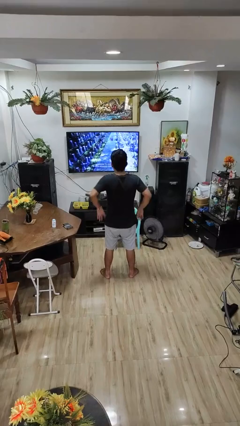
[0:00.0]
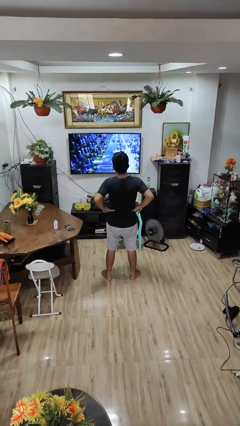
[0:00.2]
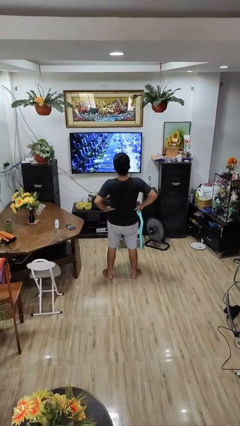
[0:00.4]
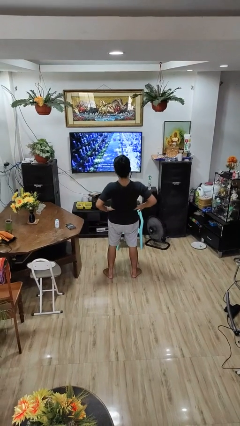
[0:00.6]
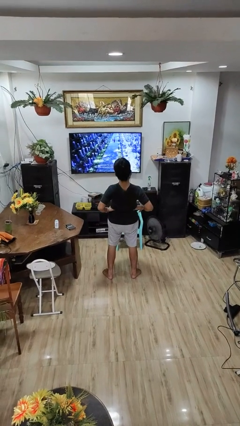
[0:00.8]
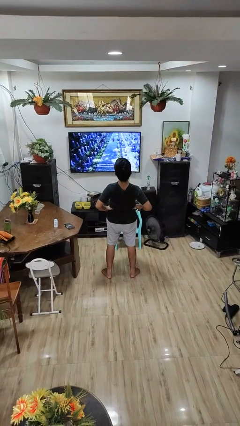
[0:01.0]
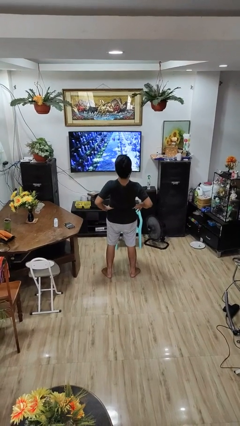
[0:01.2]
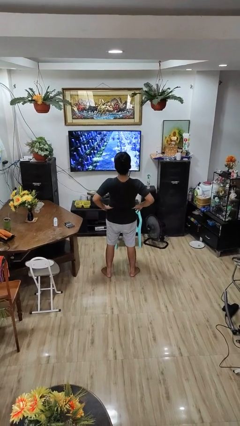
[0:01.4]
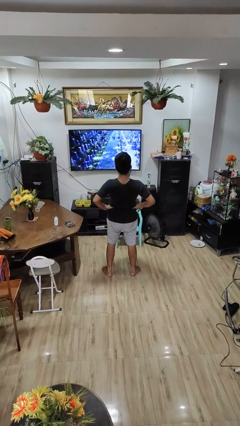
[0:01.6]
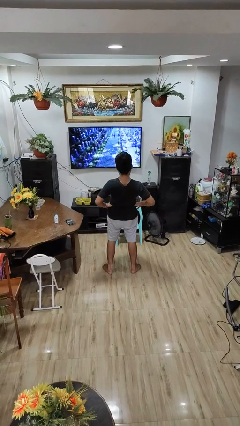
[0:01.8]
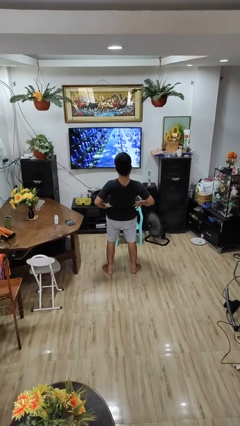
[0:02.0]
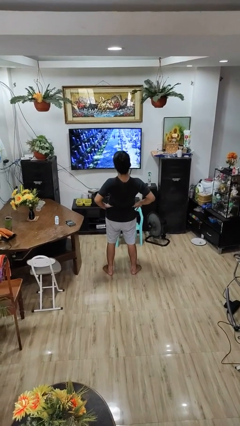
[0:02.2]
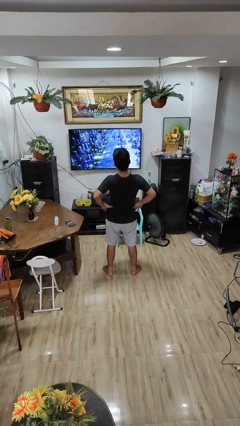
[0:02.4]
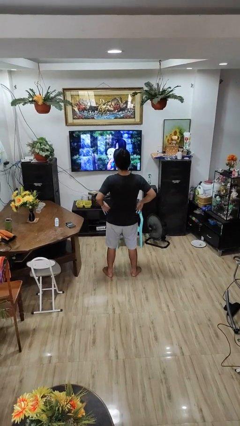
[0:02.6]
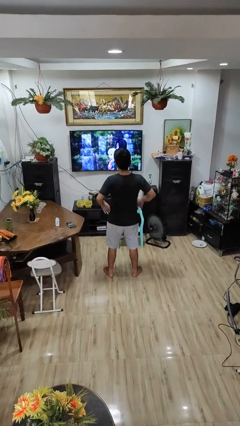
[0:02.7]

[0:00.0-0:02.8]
person stretches back

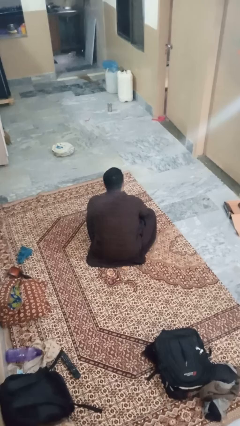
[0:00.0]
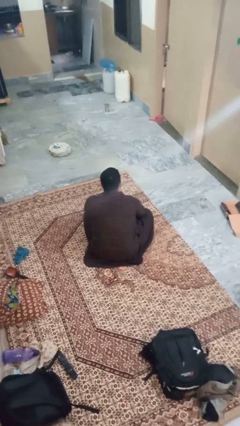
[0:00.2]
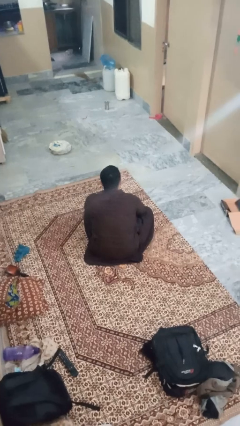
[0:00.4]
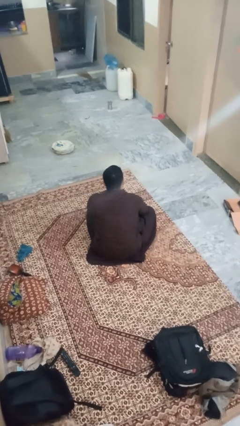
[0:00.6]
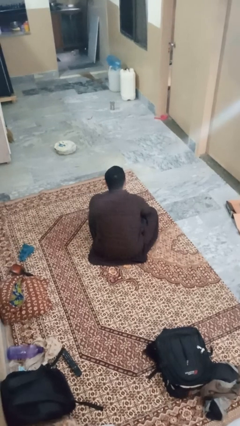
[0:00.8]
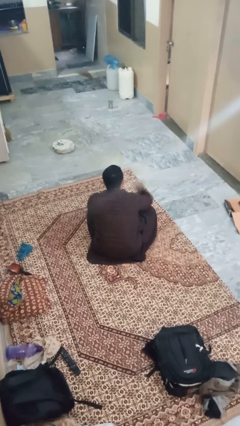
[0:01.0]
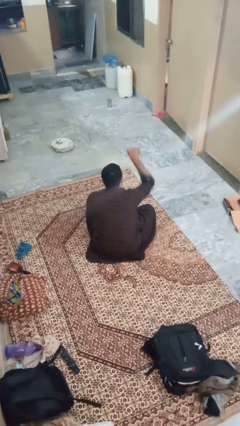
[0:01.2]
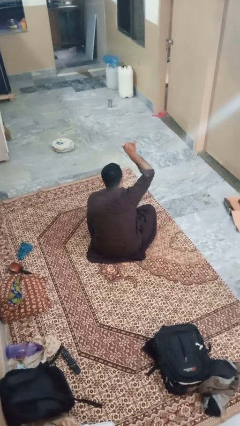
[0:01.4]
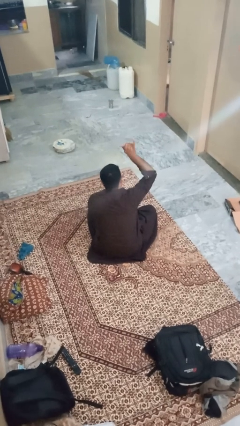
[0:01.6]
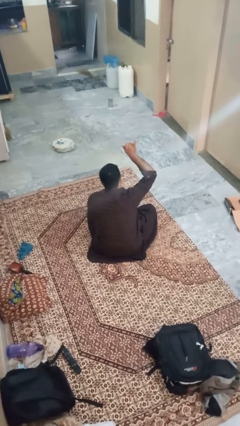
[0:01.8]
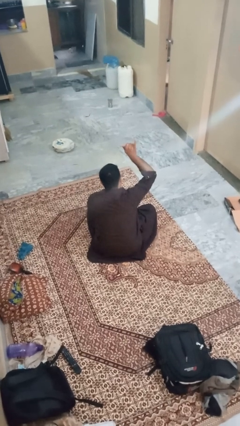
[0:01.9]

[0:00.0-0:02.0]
person gestures hang loose

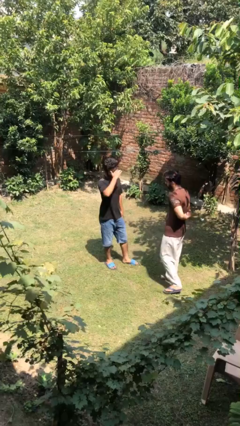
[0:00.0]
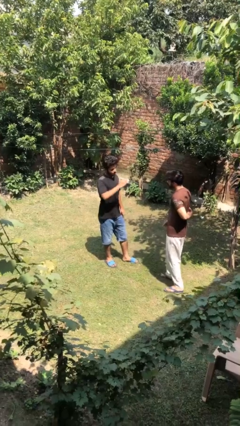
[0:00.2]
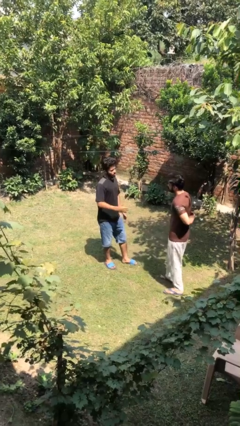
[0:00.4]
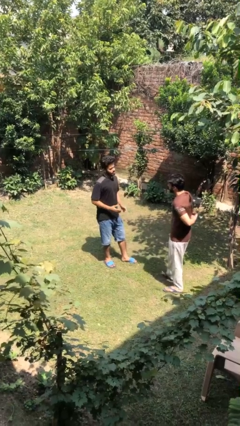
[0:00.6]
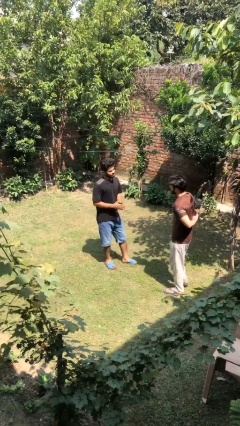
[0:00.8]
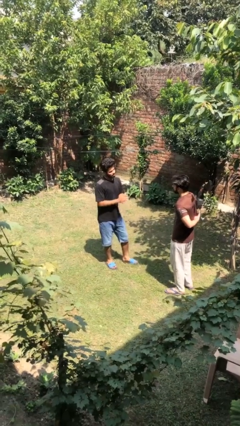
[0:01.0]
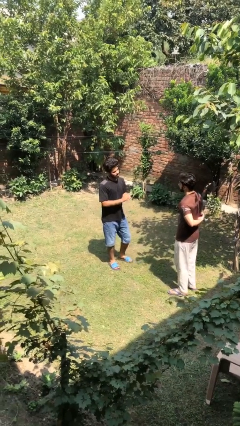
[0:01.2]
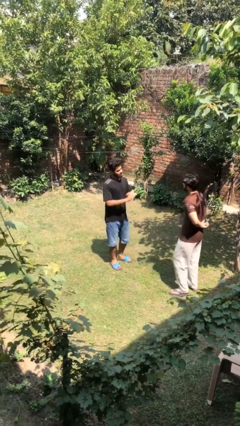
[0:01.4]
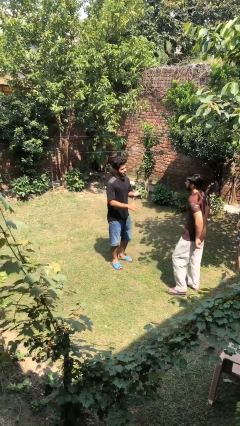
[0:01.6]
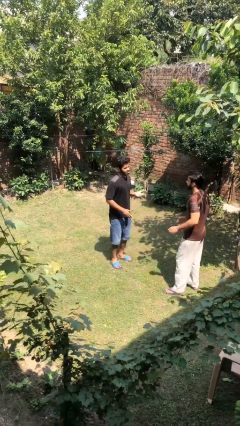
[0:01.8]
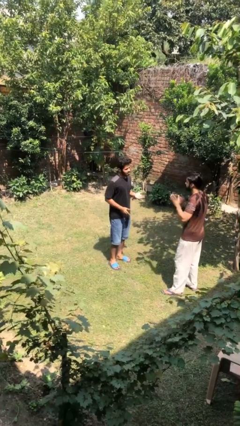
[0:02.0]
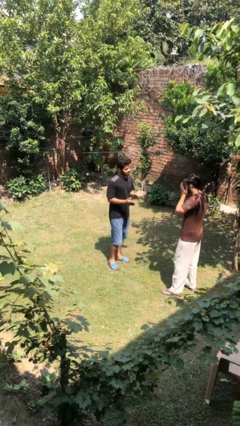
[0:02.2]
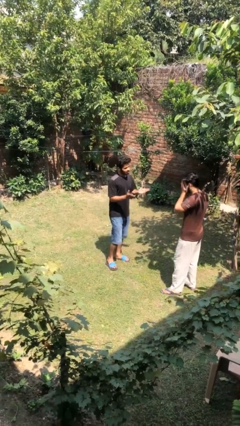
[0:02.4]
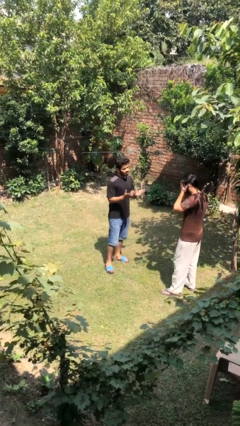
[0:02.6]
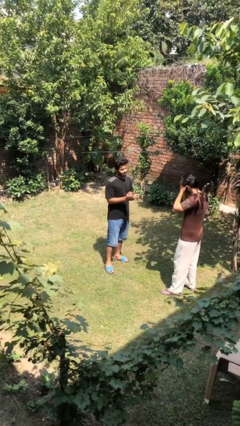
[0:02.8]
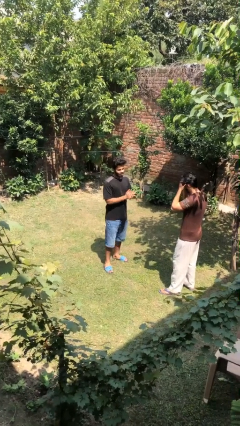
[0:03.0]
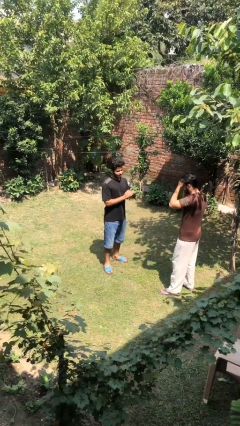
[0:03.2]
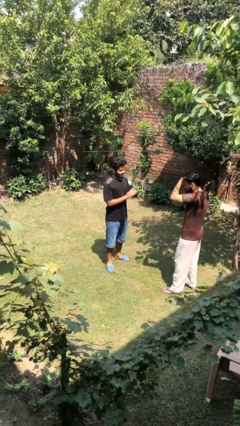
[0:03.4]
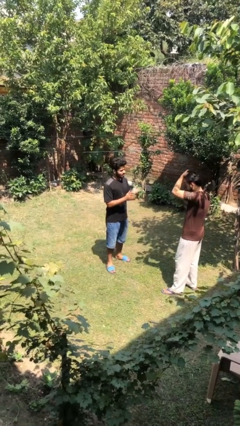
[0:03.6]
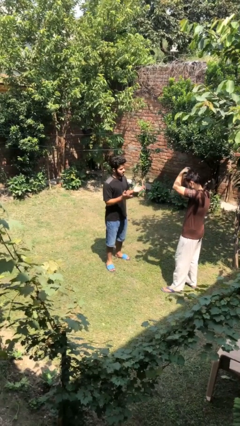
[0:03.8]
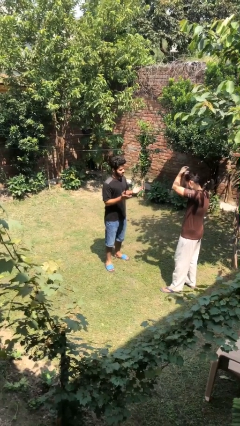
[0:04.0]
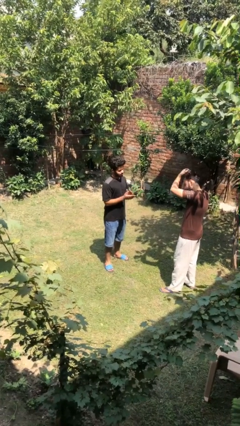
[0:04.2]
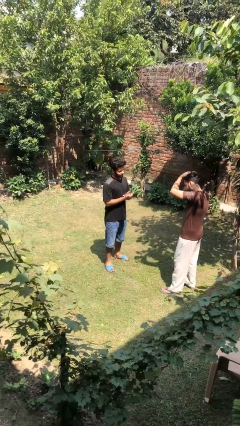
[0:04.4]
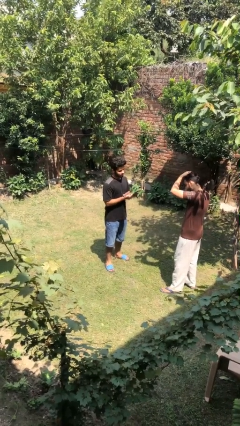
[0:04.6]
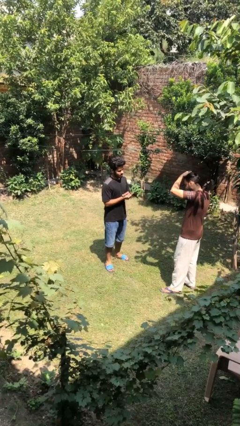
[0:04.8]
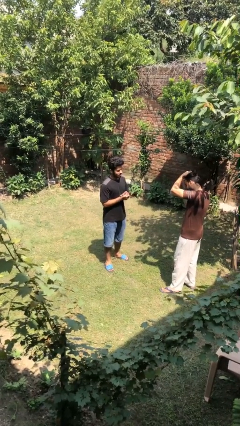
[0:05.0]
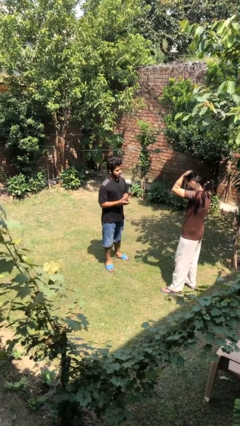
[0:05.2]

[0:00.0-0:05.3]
person talks to person

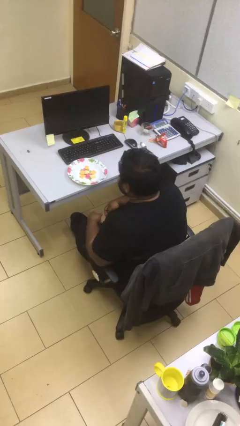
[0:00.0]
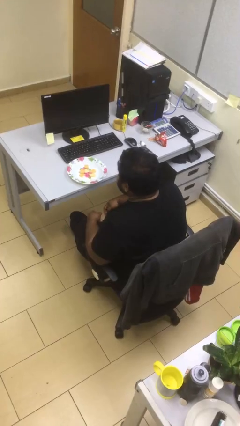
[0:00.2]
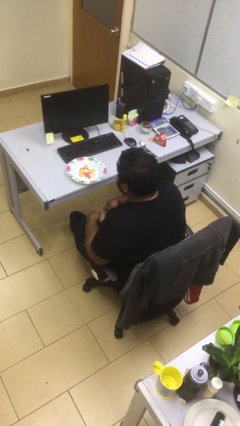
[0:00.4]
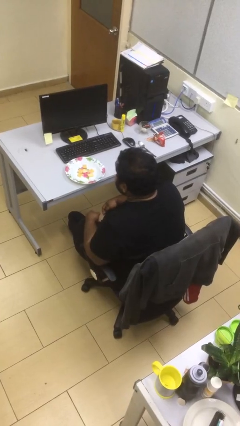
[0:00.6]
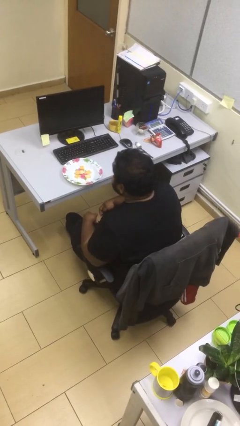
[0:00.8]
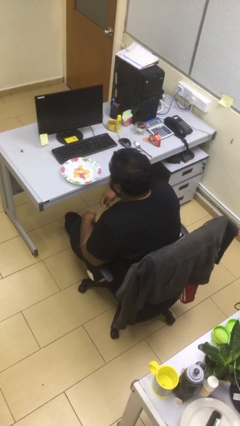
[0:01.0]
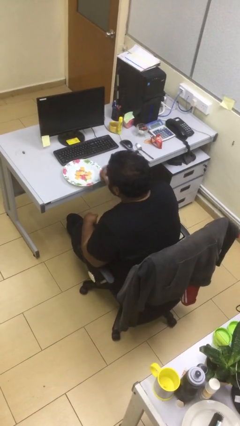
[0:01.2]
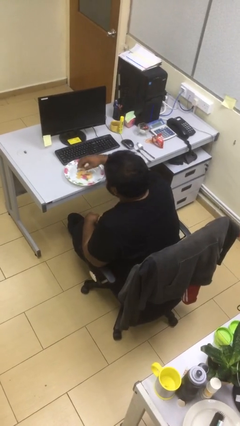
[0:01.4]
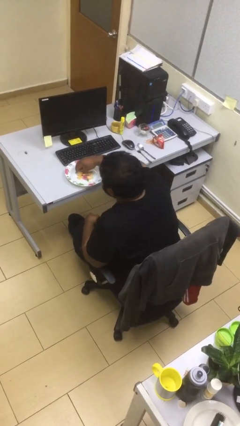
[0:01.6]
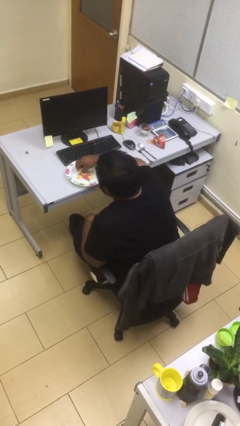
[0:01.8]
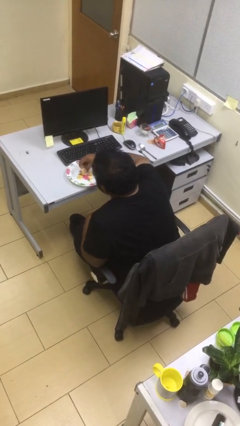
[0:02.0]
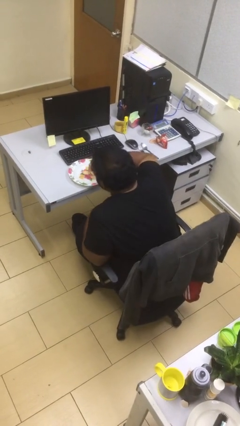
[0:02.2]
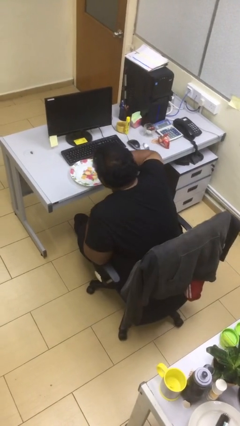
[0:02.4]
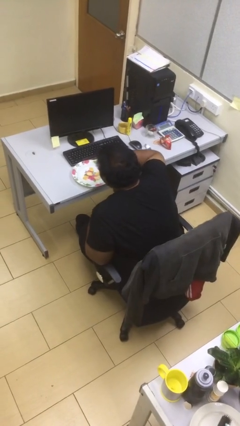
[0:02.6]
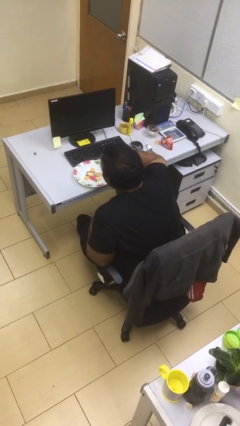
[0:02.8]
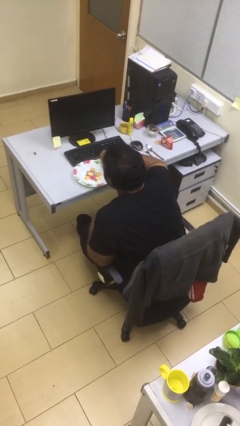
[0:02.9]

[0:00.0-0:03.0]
person eats with hands

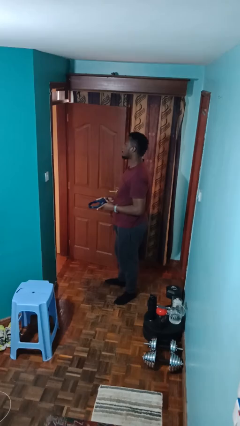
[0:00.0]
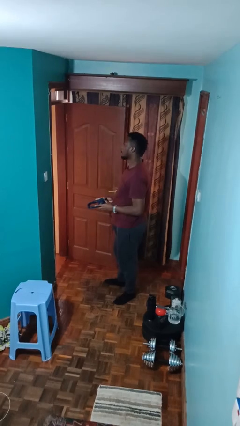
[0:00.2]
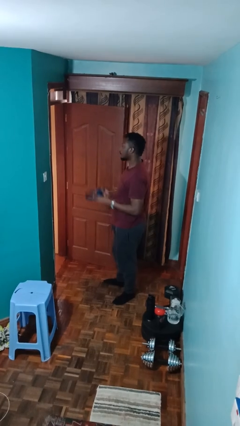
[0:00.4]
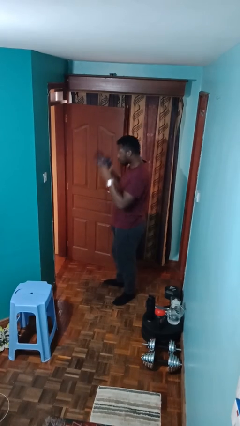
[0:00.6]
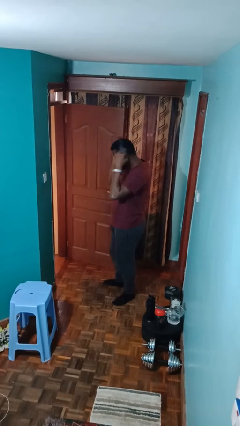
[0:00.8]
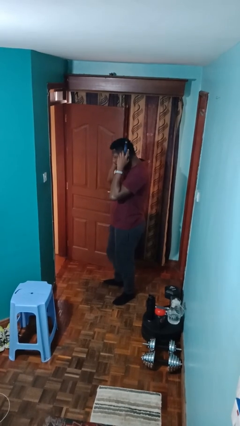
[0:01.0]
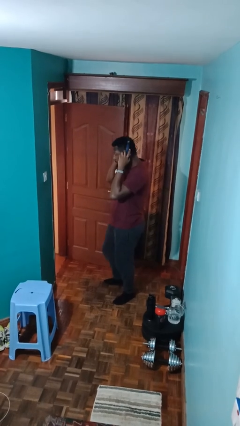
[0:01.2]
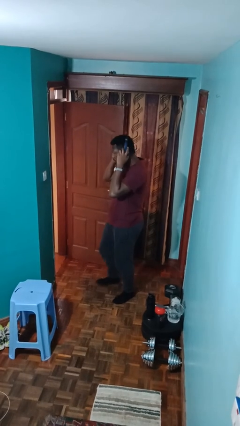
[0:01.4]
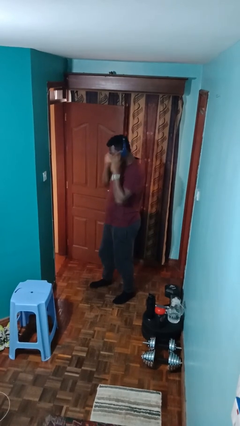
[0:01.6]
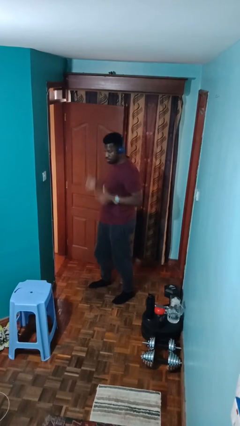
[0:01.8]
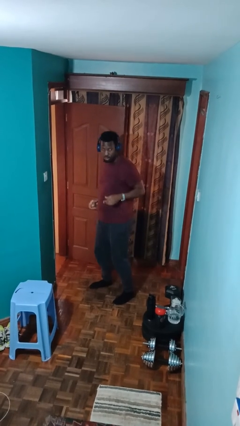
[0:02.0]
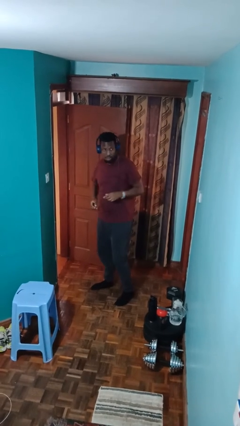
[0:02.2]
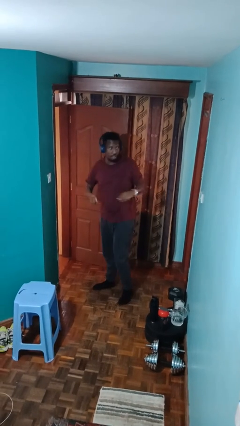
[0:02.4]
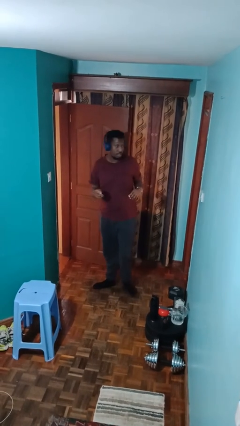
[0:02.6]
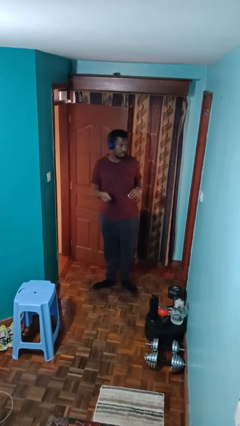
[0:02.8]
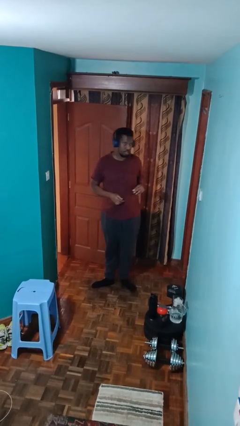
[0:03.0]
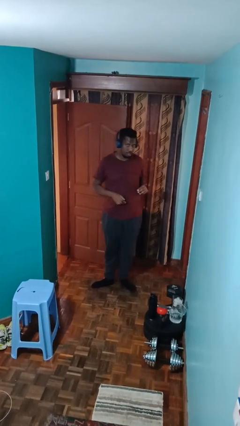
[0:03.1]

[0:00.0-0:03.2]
person puts on headphones

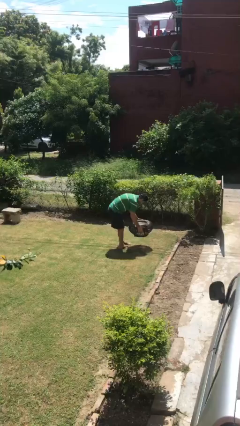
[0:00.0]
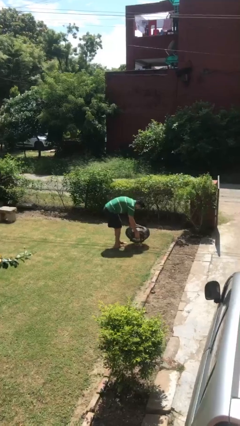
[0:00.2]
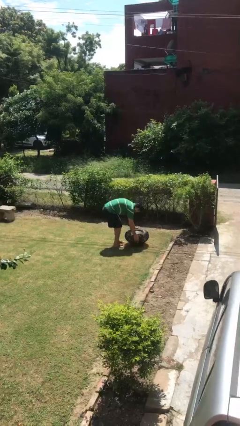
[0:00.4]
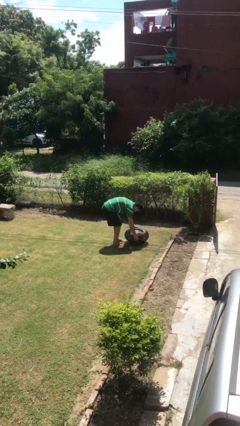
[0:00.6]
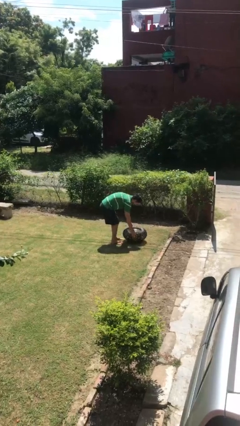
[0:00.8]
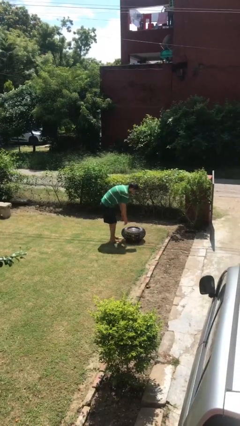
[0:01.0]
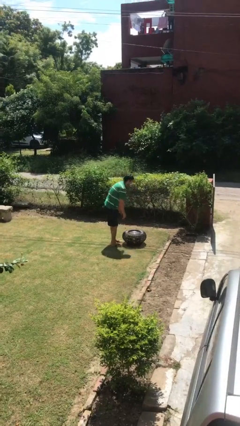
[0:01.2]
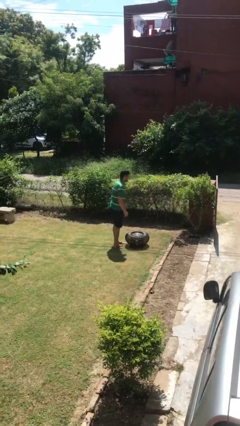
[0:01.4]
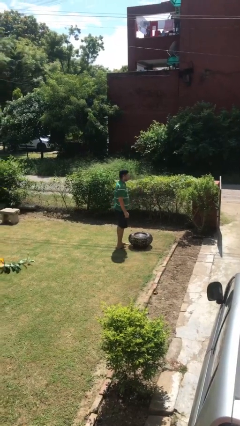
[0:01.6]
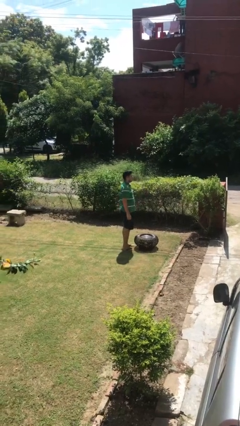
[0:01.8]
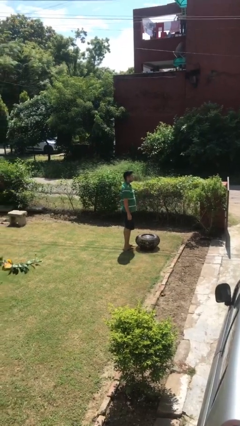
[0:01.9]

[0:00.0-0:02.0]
person puts down object on floor
